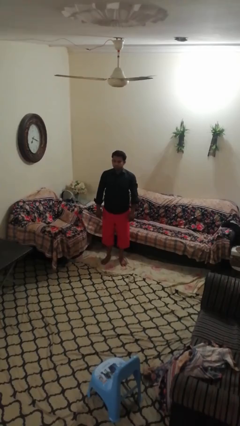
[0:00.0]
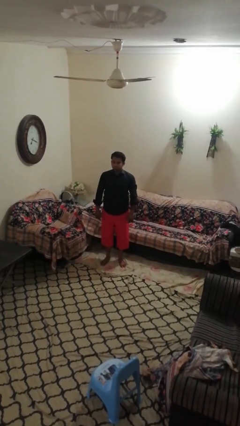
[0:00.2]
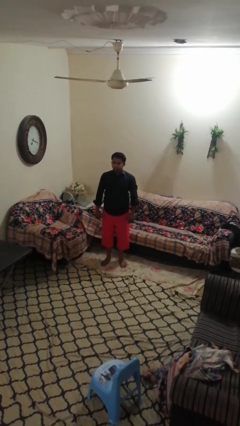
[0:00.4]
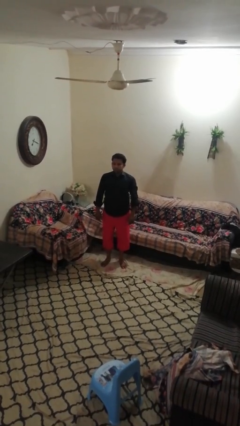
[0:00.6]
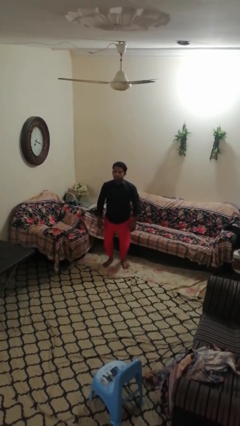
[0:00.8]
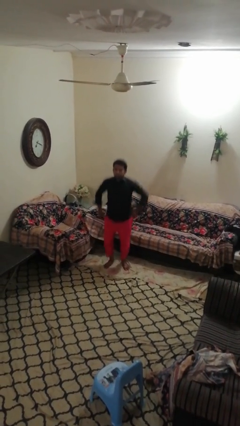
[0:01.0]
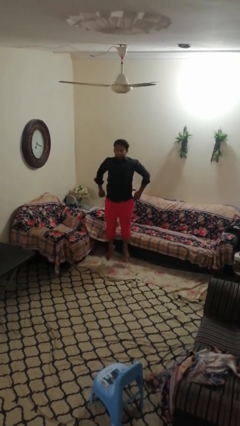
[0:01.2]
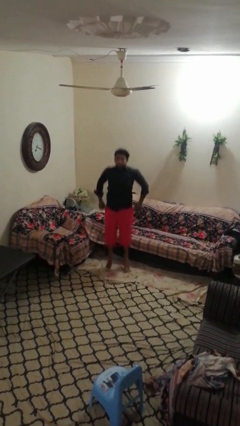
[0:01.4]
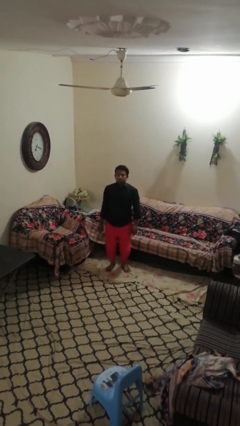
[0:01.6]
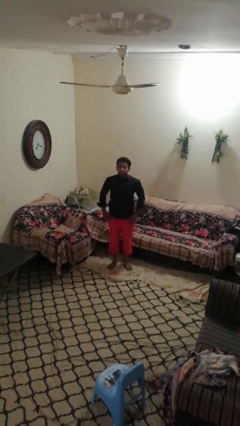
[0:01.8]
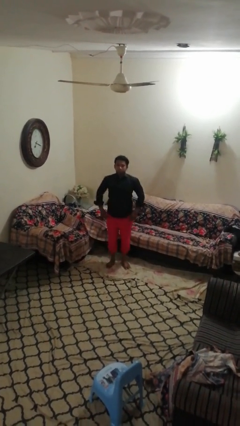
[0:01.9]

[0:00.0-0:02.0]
person jumps

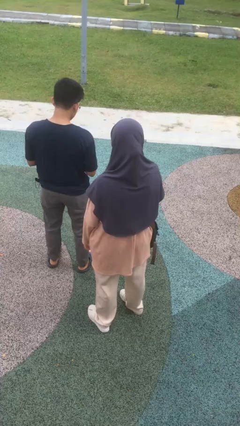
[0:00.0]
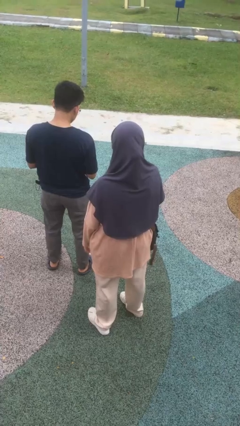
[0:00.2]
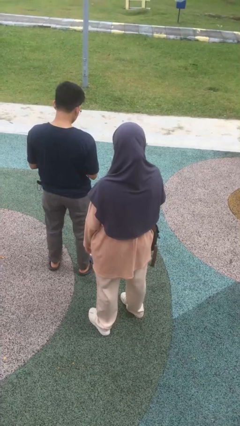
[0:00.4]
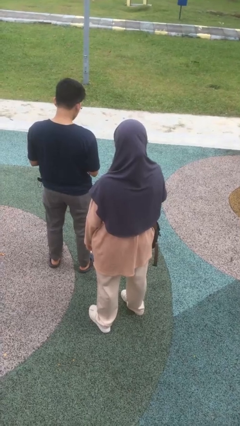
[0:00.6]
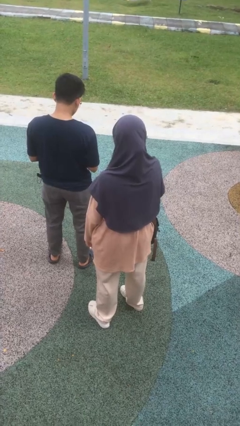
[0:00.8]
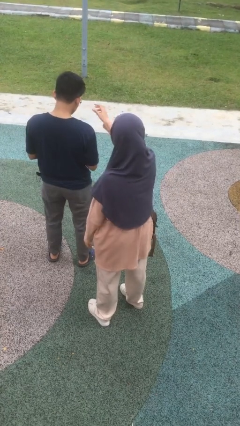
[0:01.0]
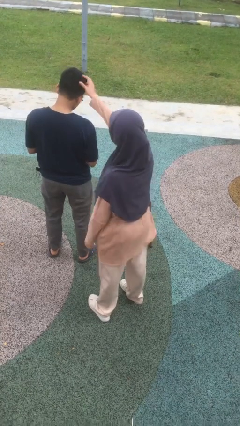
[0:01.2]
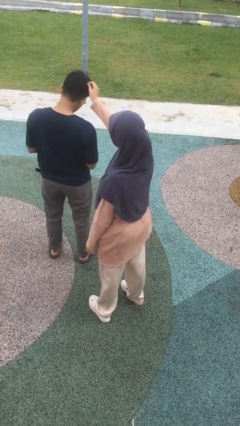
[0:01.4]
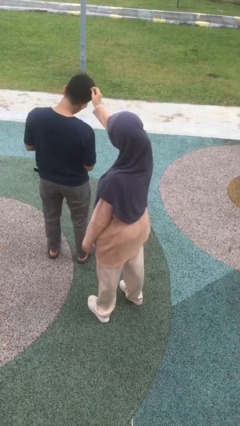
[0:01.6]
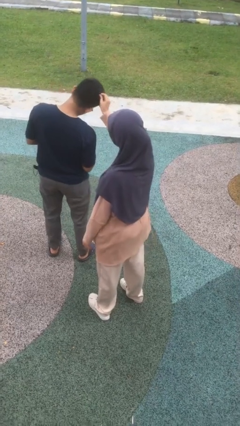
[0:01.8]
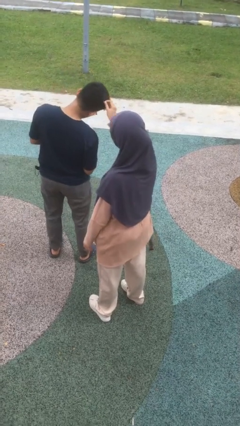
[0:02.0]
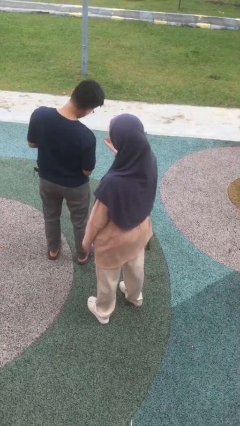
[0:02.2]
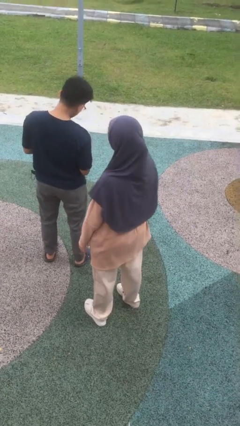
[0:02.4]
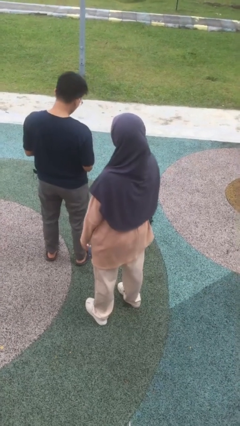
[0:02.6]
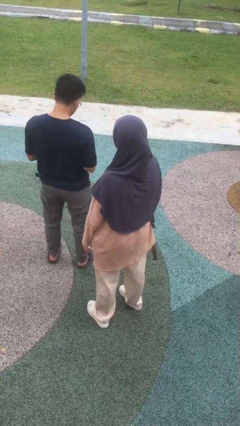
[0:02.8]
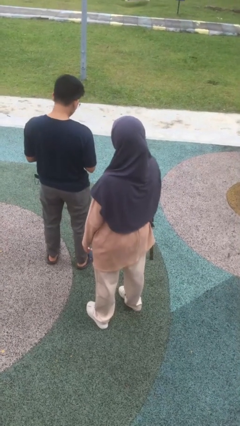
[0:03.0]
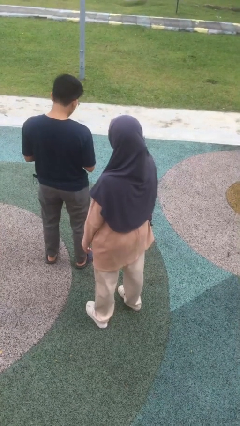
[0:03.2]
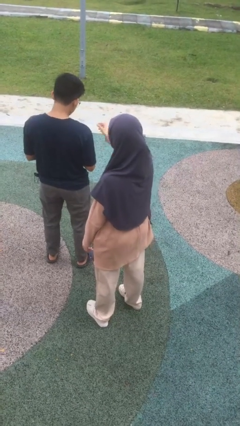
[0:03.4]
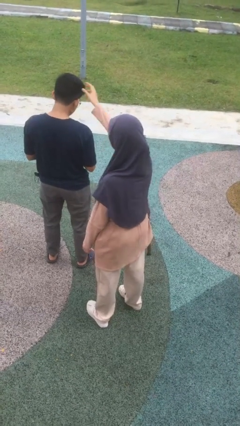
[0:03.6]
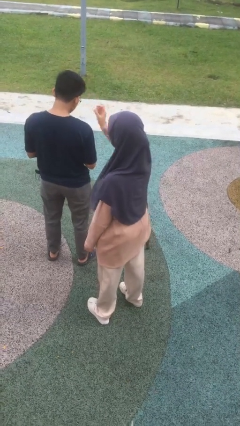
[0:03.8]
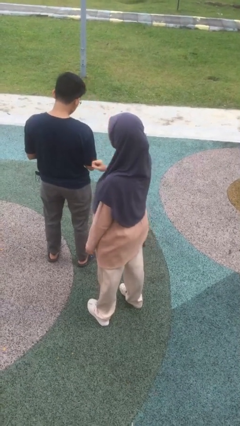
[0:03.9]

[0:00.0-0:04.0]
person grabs person by hair

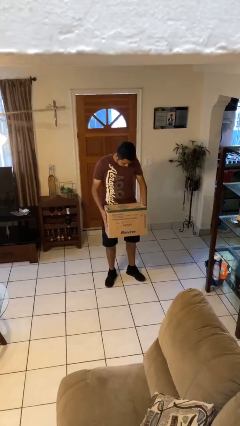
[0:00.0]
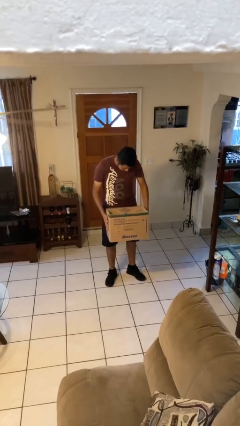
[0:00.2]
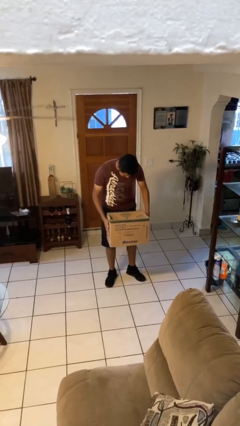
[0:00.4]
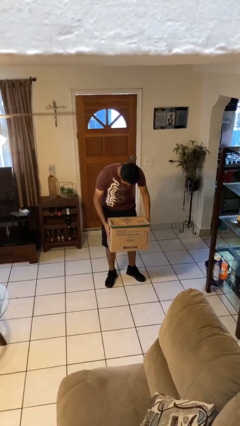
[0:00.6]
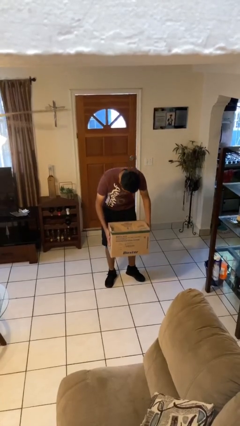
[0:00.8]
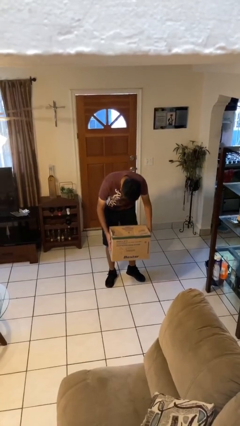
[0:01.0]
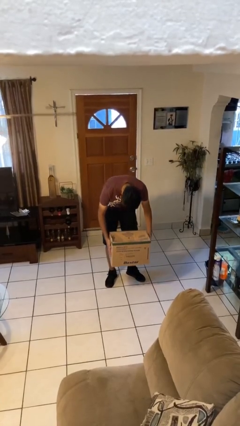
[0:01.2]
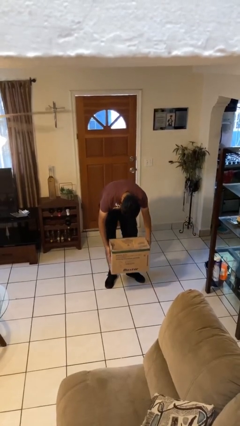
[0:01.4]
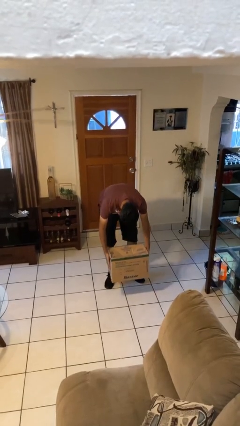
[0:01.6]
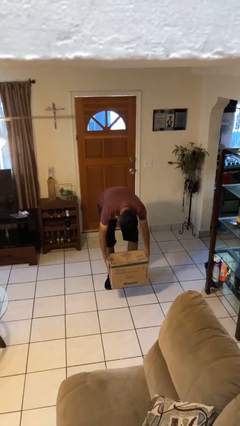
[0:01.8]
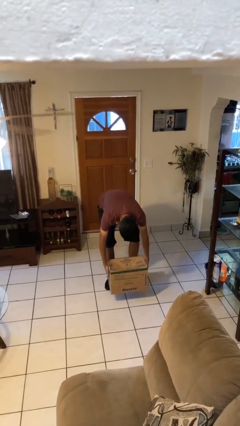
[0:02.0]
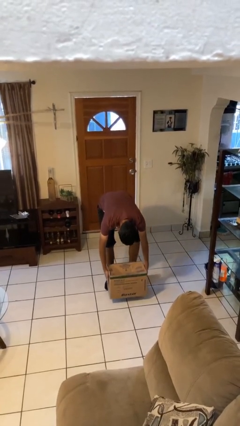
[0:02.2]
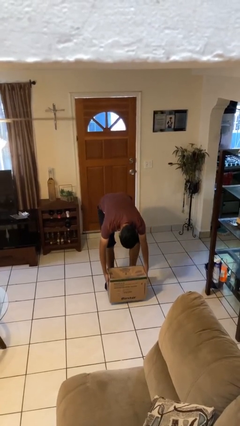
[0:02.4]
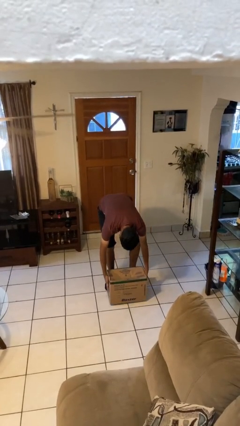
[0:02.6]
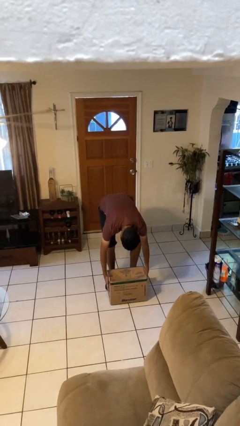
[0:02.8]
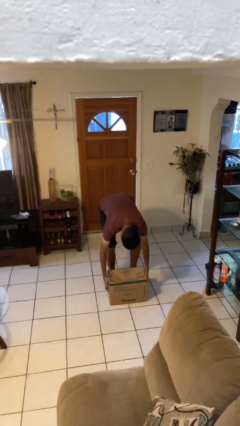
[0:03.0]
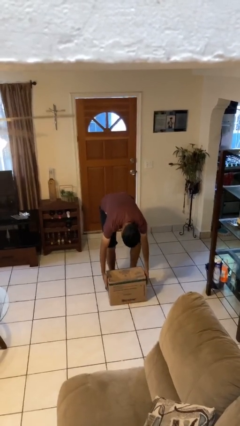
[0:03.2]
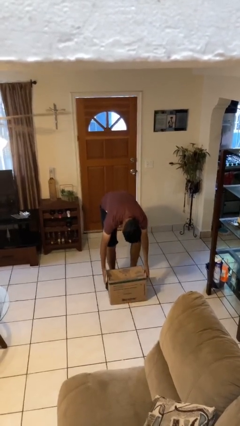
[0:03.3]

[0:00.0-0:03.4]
person puts down object on floor

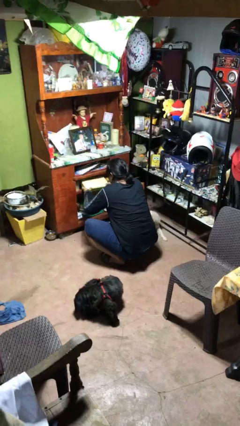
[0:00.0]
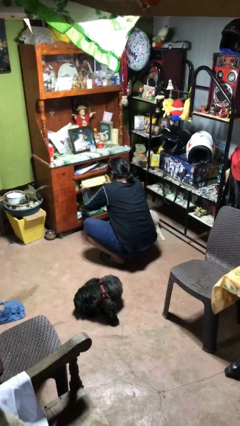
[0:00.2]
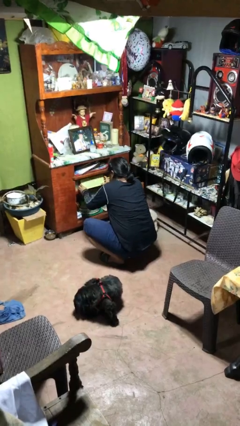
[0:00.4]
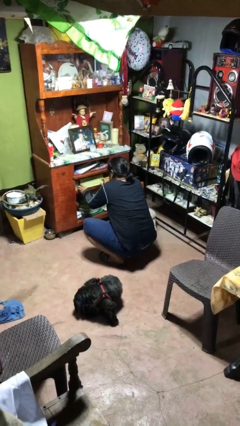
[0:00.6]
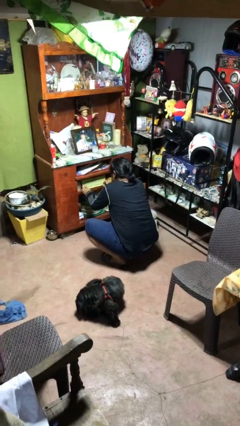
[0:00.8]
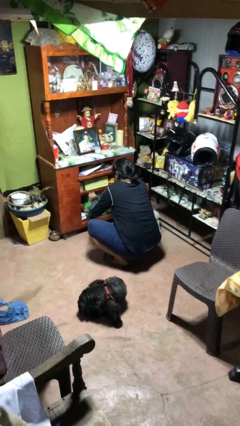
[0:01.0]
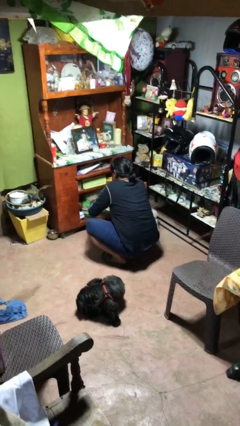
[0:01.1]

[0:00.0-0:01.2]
person puts down object into cabinet

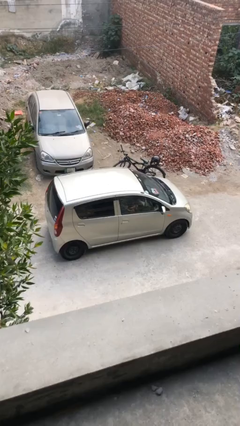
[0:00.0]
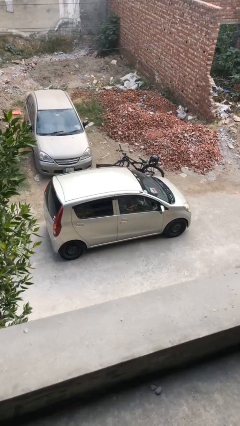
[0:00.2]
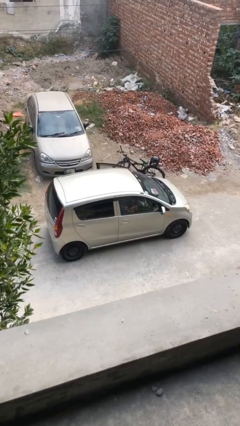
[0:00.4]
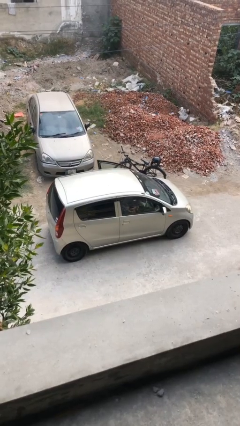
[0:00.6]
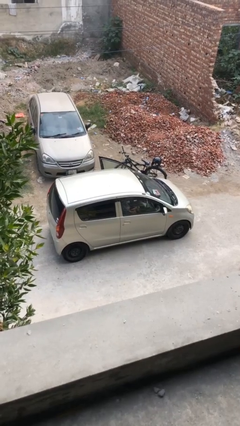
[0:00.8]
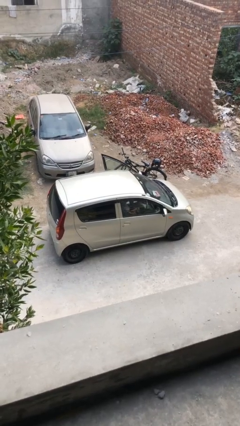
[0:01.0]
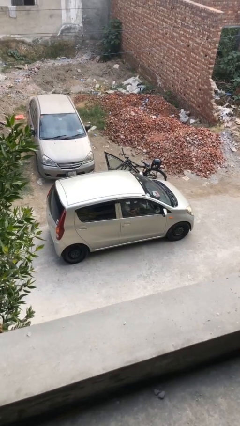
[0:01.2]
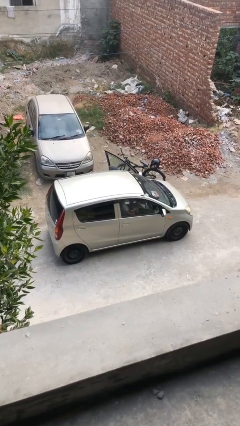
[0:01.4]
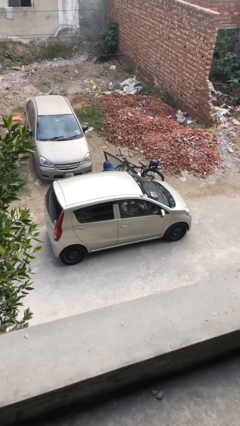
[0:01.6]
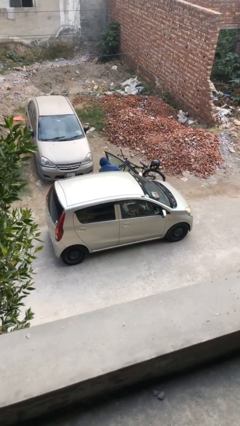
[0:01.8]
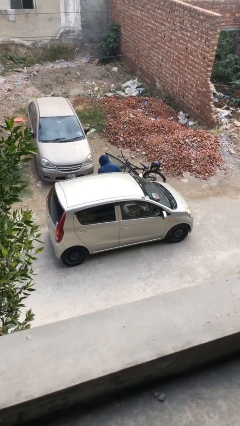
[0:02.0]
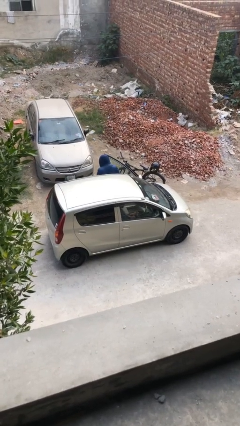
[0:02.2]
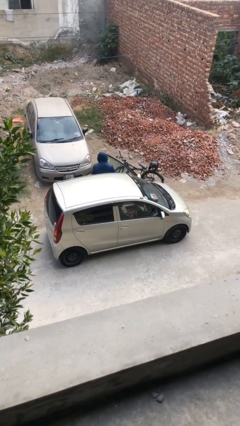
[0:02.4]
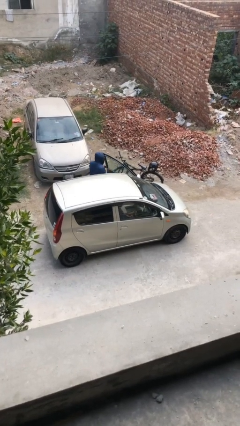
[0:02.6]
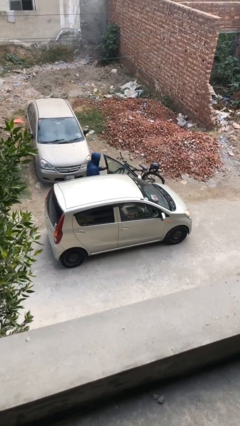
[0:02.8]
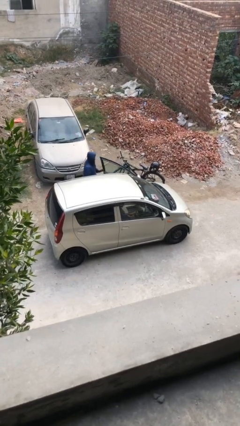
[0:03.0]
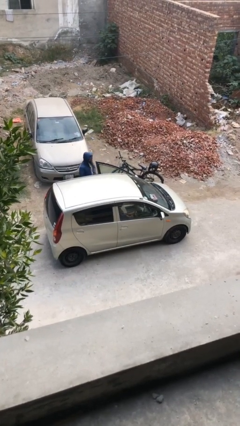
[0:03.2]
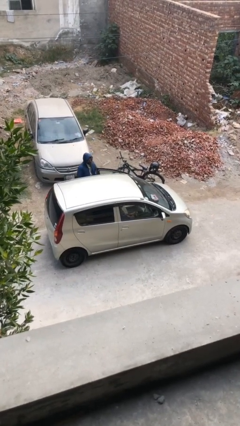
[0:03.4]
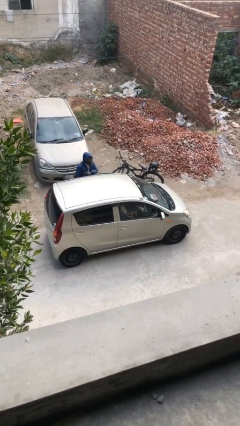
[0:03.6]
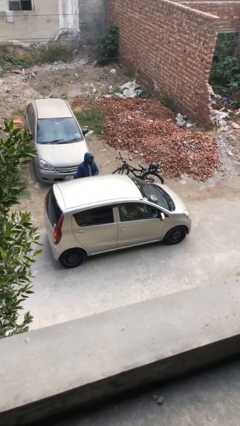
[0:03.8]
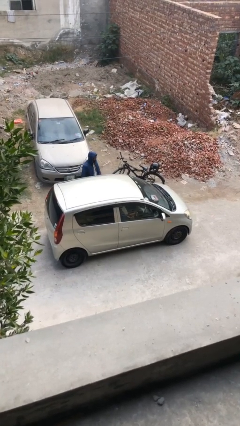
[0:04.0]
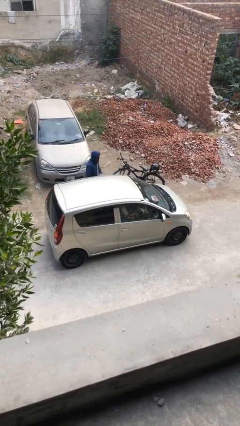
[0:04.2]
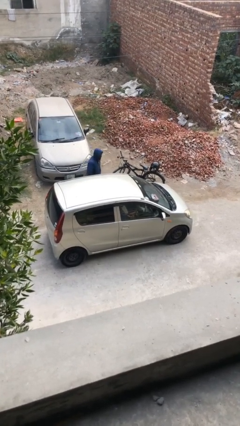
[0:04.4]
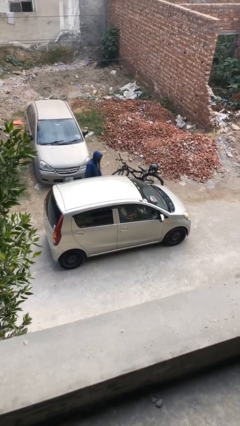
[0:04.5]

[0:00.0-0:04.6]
car drops off person

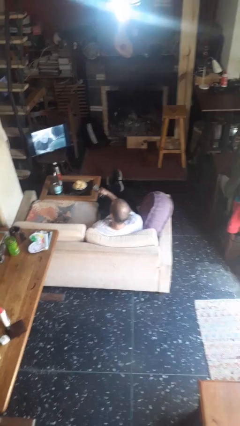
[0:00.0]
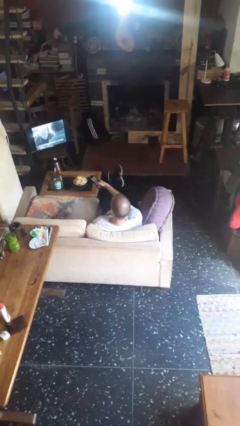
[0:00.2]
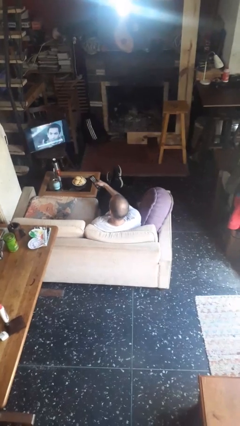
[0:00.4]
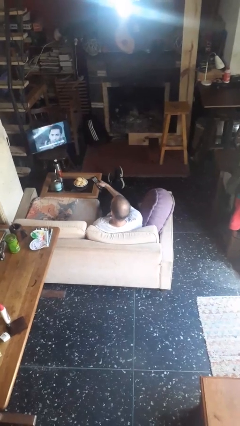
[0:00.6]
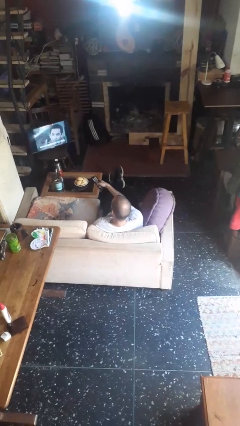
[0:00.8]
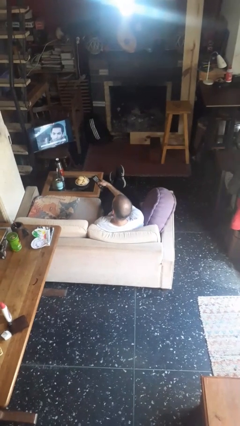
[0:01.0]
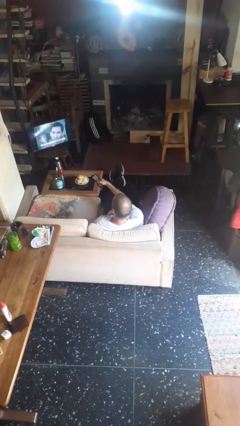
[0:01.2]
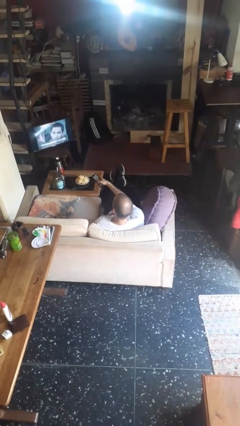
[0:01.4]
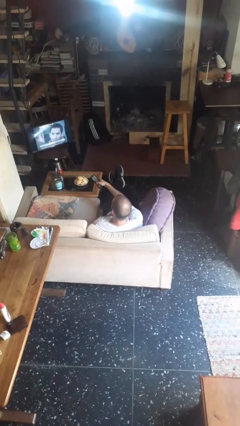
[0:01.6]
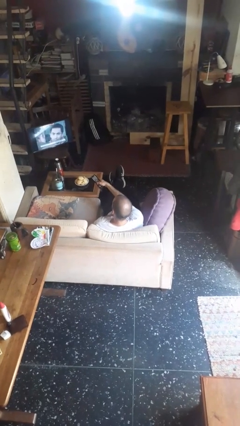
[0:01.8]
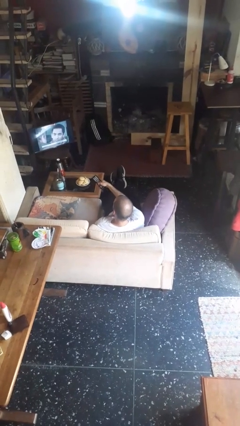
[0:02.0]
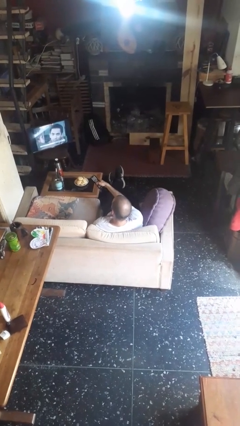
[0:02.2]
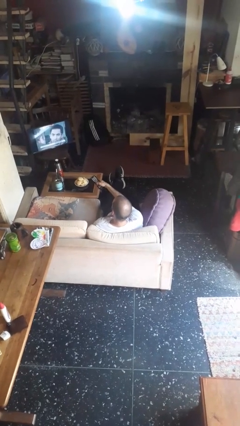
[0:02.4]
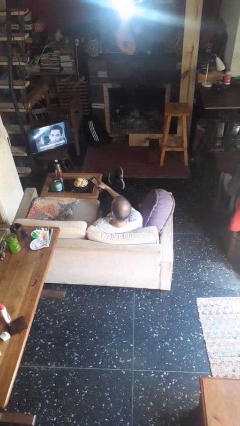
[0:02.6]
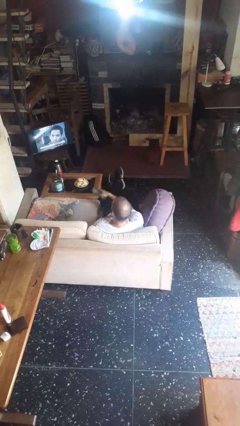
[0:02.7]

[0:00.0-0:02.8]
person uses television remote
